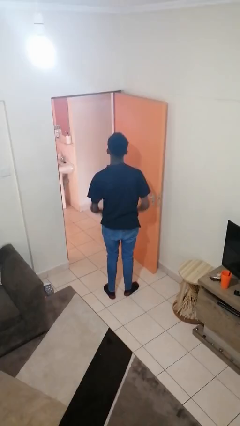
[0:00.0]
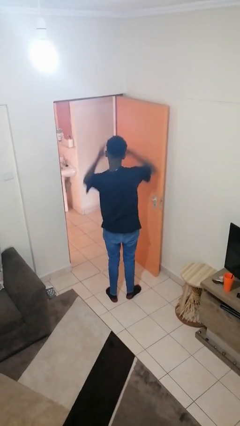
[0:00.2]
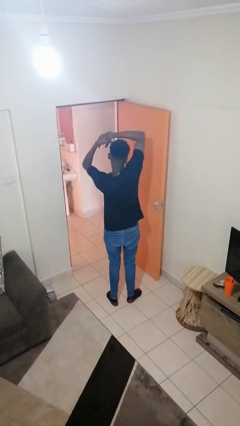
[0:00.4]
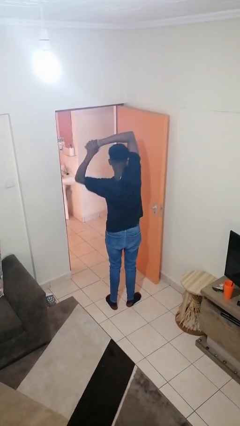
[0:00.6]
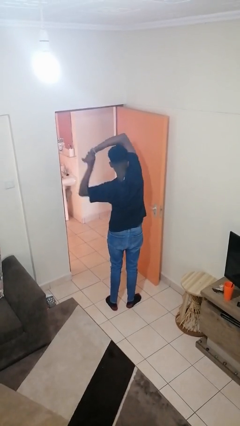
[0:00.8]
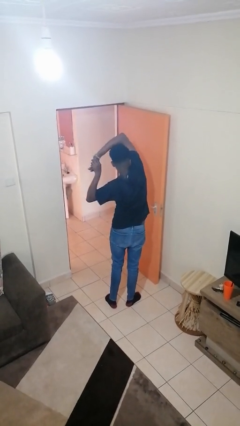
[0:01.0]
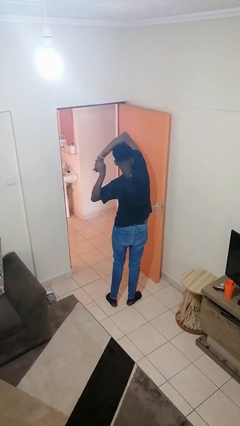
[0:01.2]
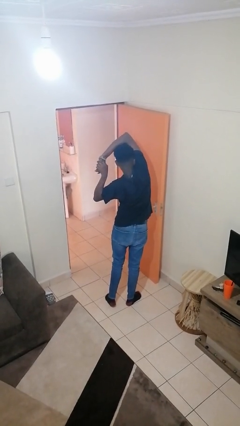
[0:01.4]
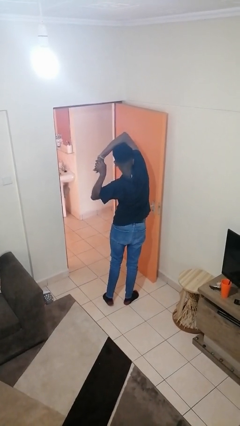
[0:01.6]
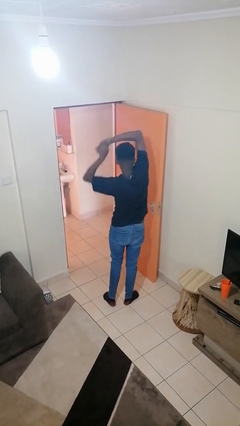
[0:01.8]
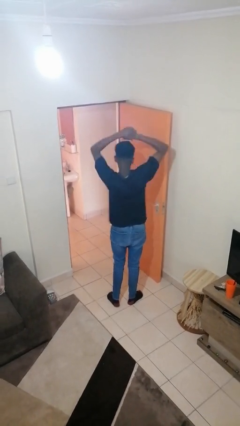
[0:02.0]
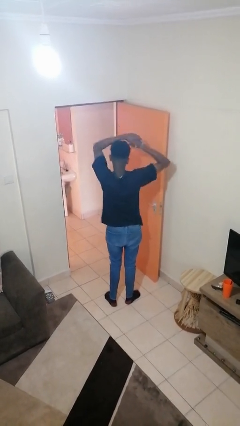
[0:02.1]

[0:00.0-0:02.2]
person stretches arms over head

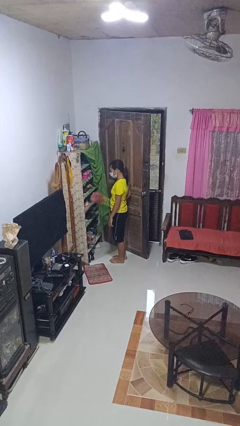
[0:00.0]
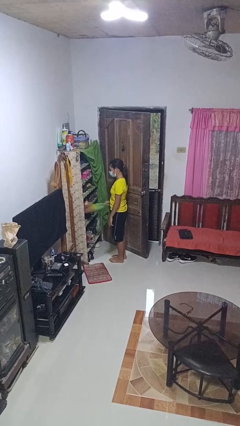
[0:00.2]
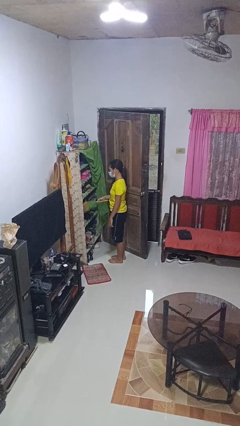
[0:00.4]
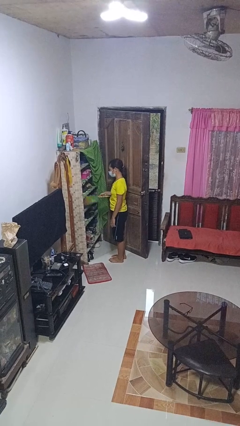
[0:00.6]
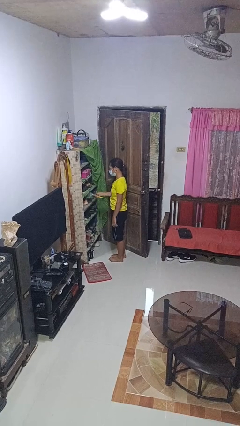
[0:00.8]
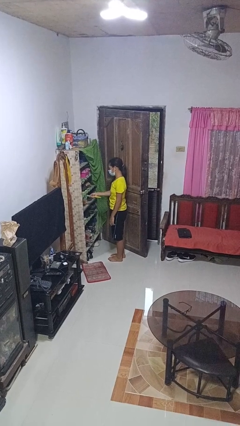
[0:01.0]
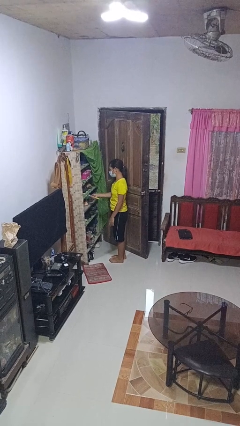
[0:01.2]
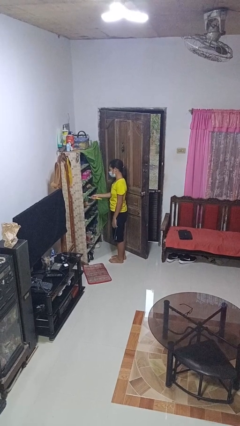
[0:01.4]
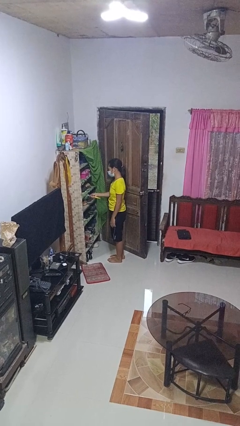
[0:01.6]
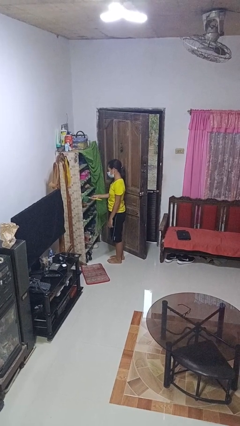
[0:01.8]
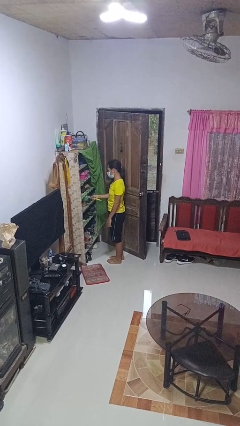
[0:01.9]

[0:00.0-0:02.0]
person dusts furniture

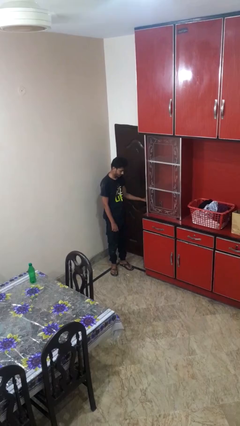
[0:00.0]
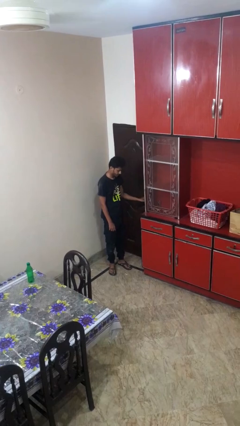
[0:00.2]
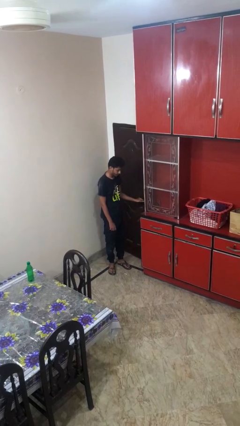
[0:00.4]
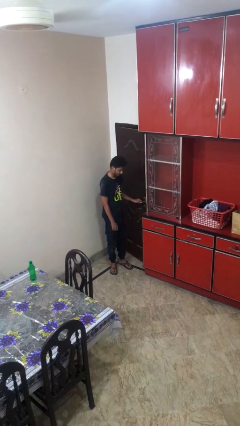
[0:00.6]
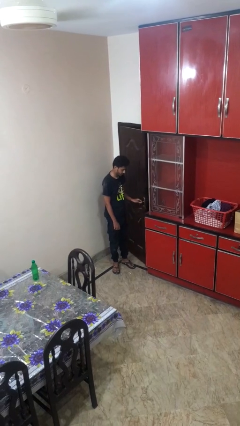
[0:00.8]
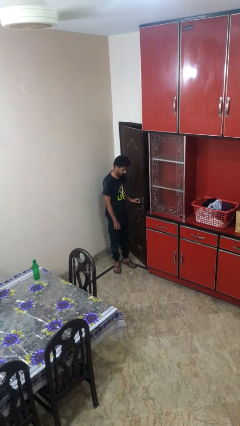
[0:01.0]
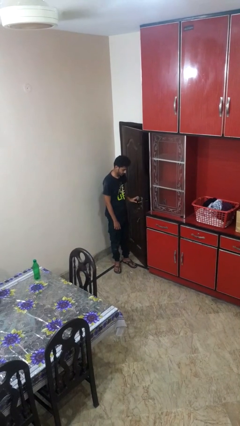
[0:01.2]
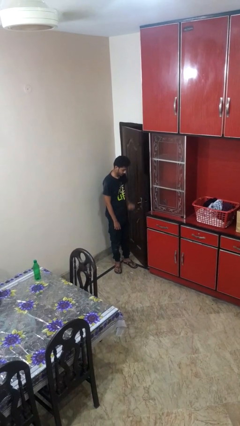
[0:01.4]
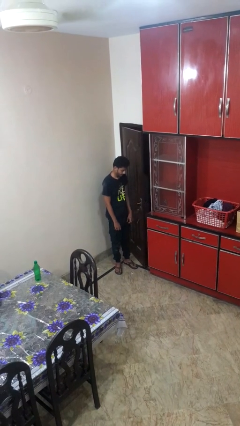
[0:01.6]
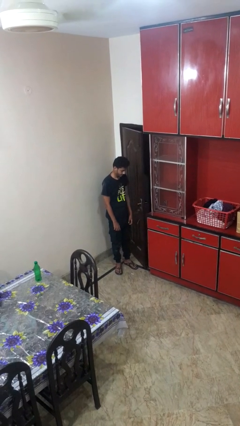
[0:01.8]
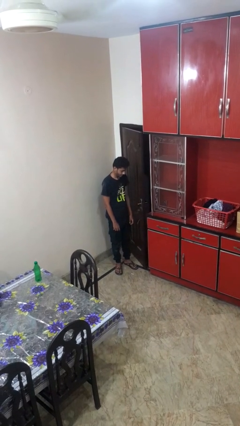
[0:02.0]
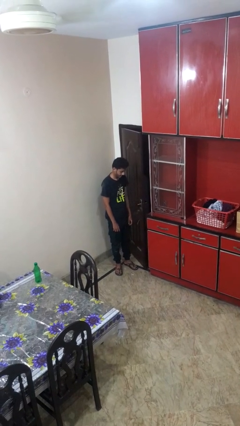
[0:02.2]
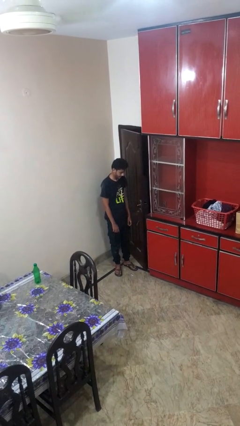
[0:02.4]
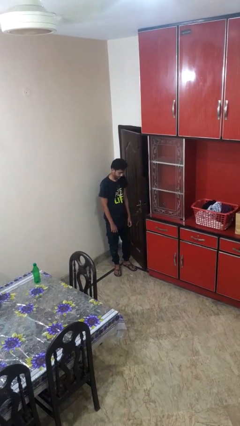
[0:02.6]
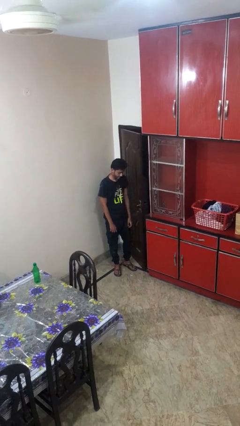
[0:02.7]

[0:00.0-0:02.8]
person opens facility door

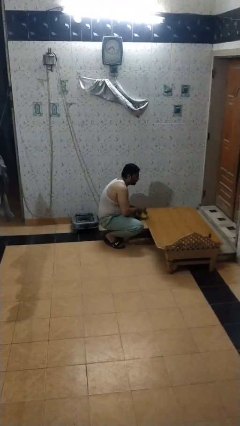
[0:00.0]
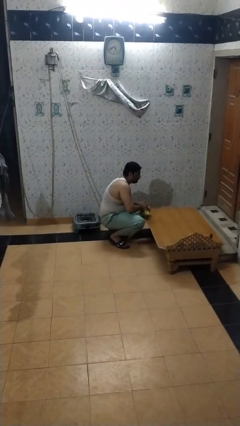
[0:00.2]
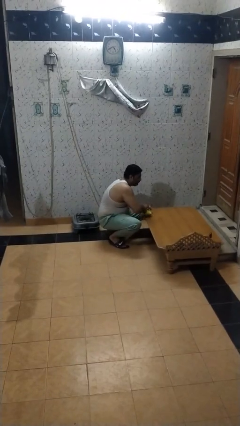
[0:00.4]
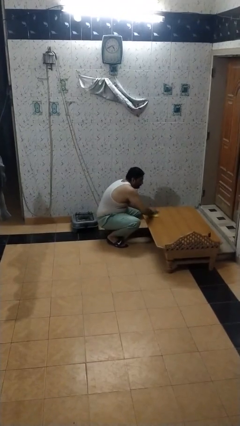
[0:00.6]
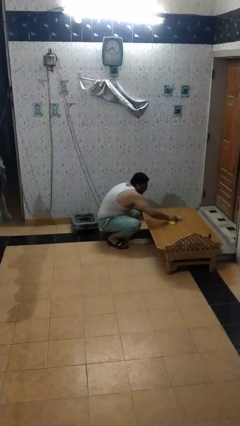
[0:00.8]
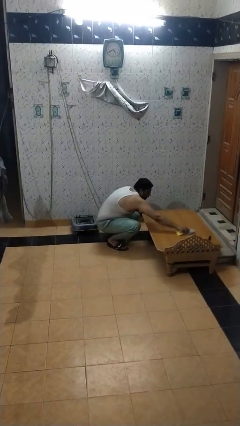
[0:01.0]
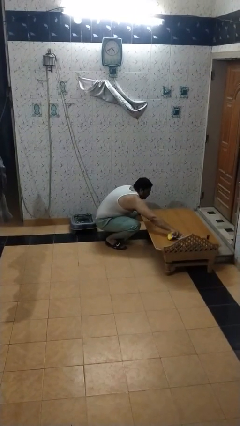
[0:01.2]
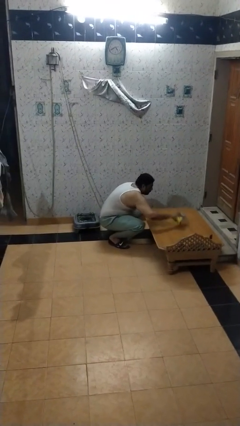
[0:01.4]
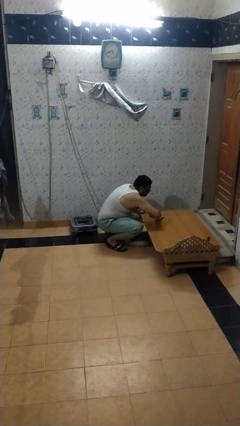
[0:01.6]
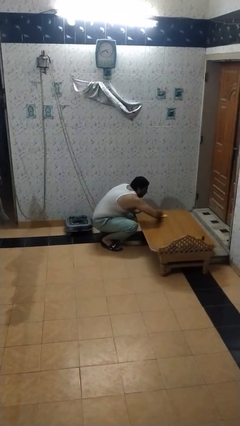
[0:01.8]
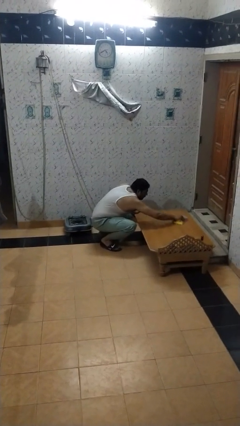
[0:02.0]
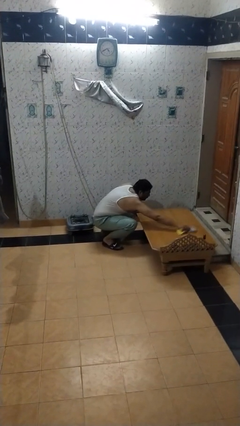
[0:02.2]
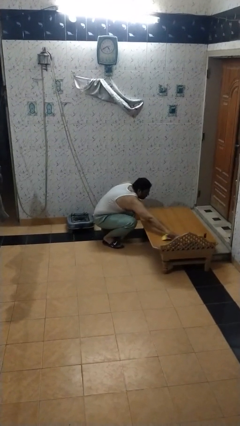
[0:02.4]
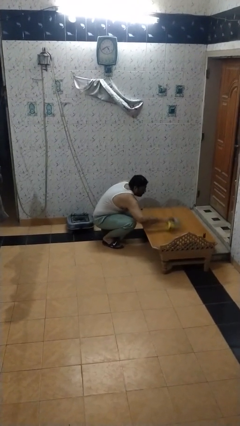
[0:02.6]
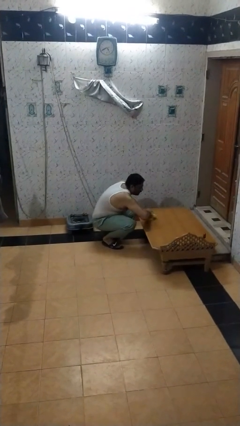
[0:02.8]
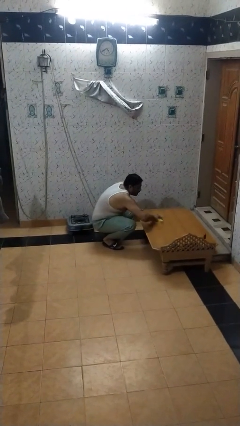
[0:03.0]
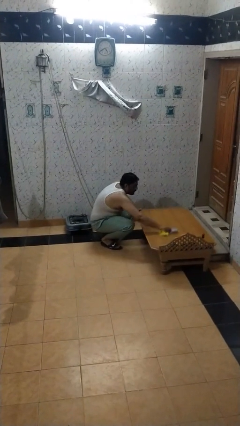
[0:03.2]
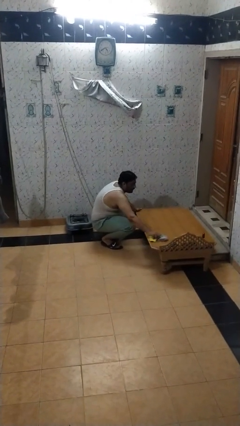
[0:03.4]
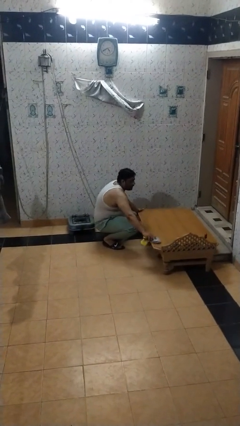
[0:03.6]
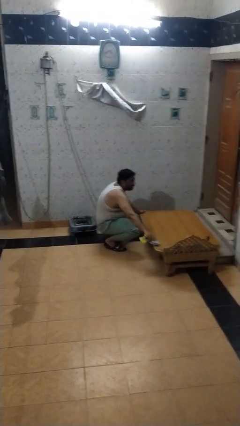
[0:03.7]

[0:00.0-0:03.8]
person cleans table with rag
